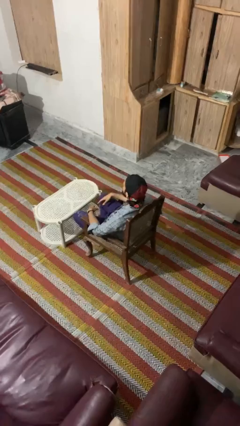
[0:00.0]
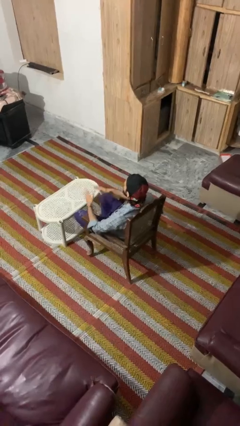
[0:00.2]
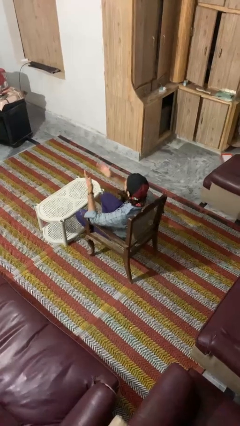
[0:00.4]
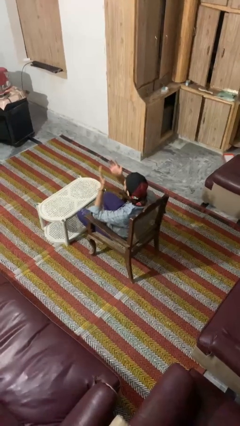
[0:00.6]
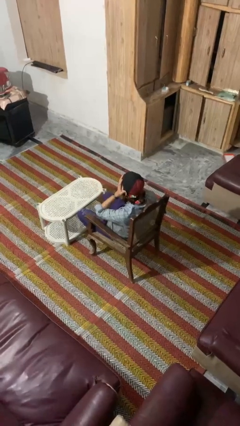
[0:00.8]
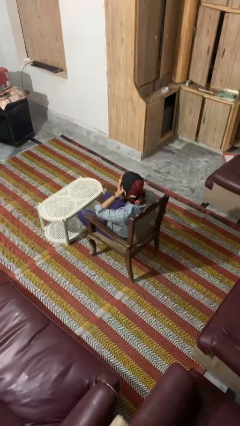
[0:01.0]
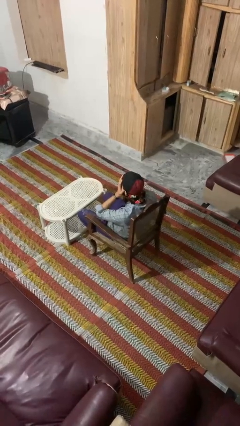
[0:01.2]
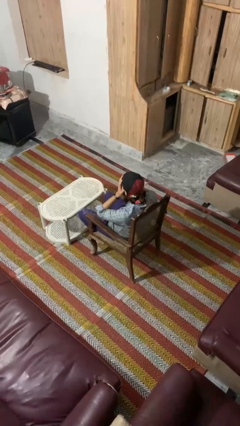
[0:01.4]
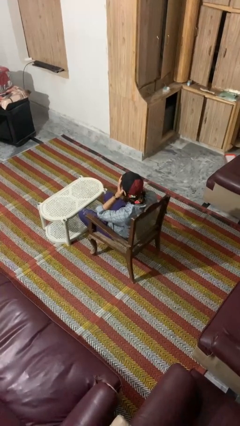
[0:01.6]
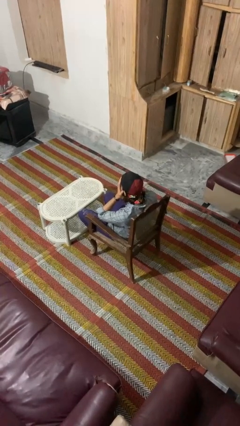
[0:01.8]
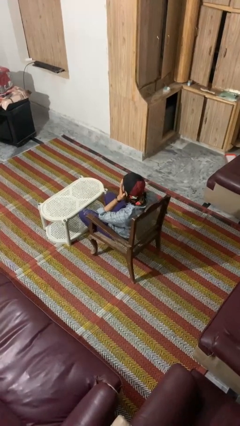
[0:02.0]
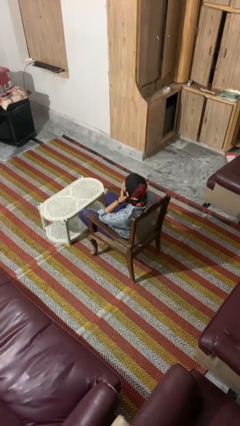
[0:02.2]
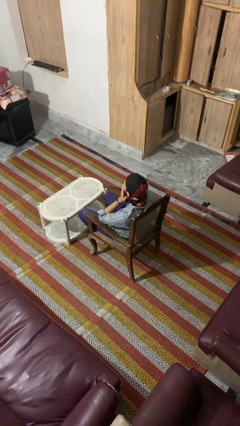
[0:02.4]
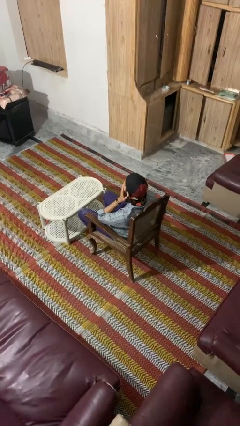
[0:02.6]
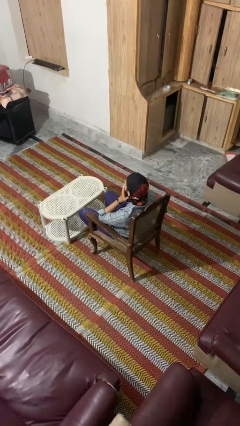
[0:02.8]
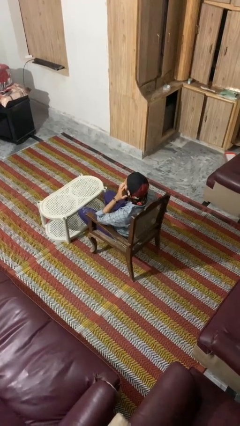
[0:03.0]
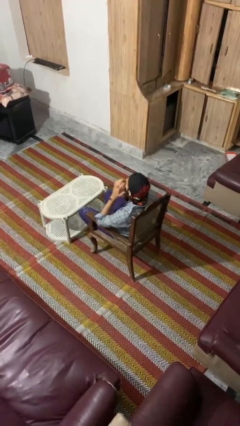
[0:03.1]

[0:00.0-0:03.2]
person covers face with hands

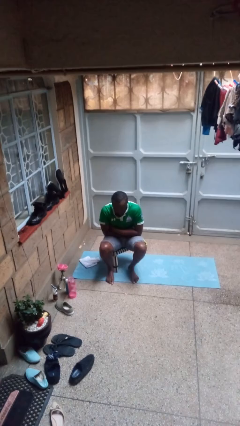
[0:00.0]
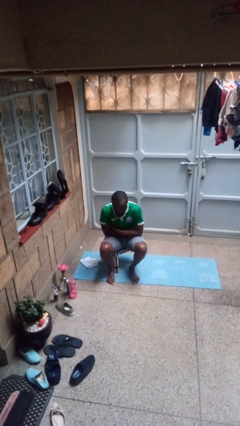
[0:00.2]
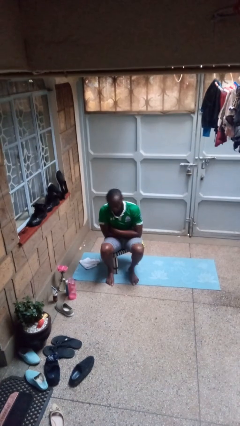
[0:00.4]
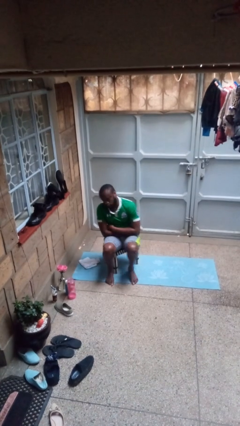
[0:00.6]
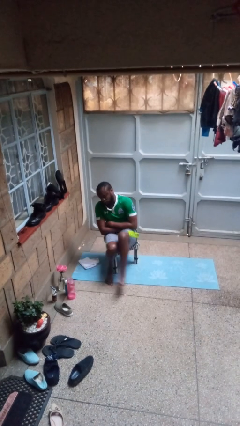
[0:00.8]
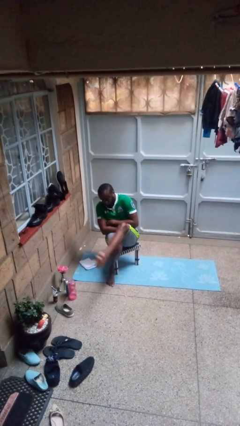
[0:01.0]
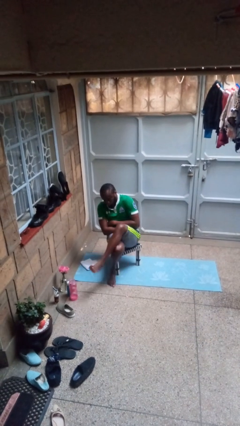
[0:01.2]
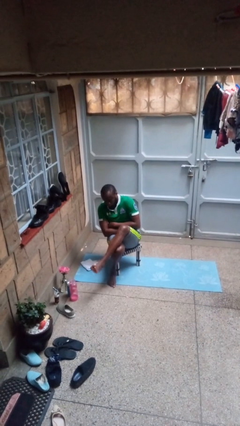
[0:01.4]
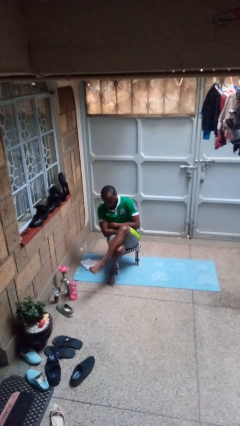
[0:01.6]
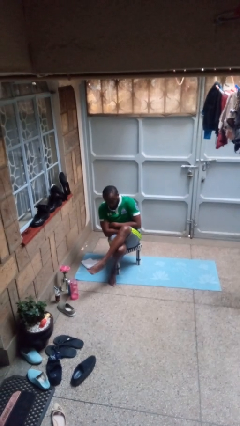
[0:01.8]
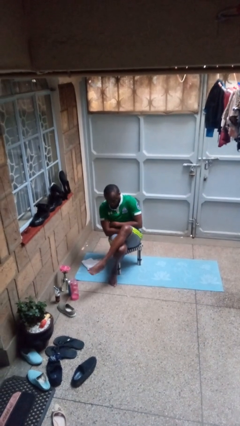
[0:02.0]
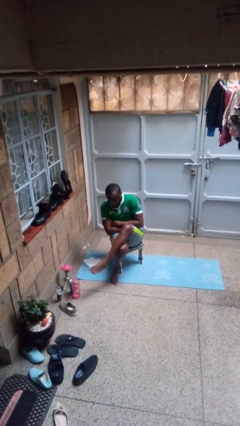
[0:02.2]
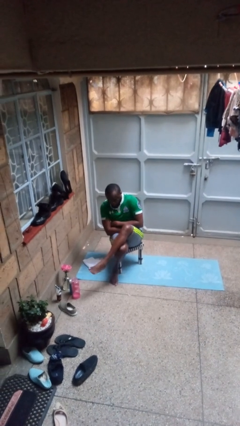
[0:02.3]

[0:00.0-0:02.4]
person crosses legs

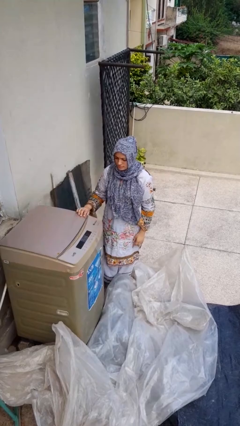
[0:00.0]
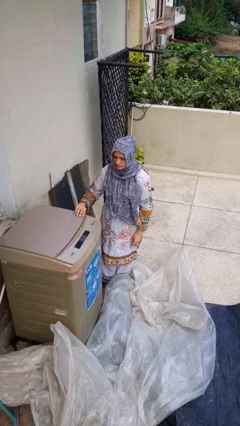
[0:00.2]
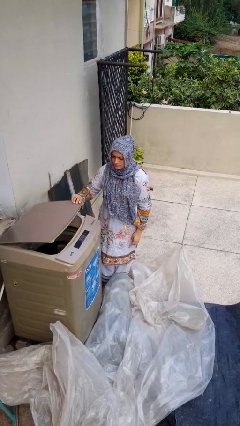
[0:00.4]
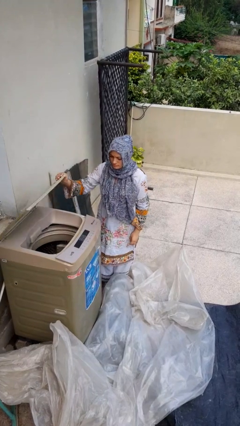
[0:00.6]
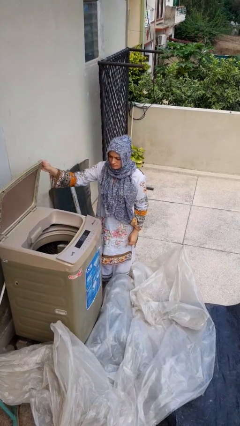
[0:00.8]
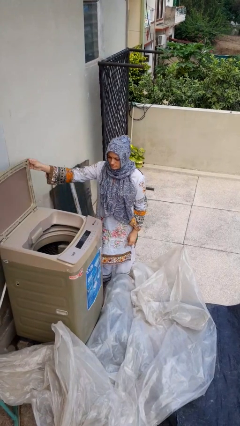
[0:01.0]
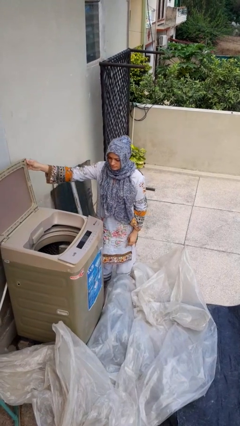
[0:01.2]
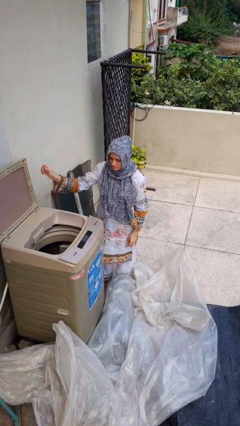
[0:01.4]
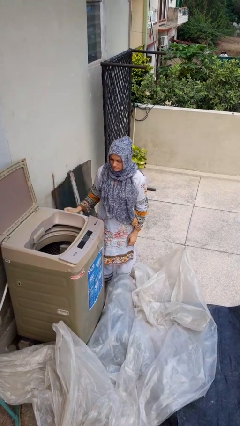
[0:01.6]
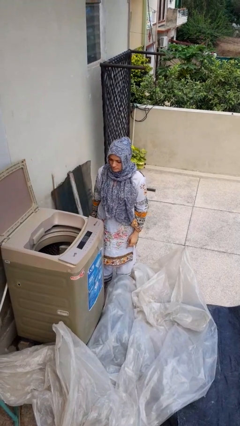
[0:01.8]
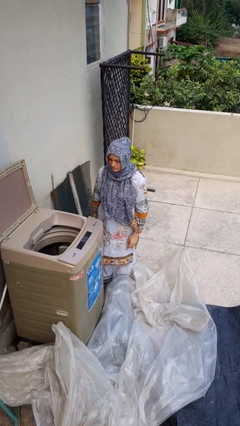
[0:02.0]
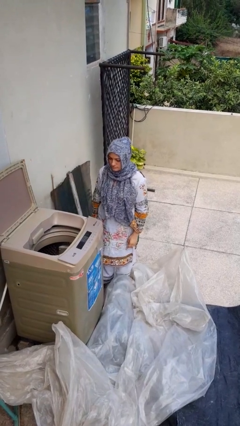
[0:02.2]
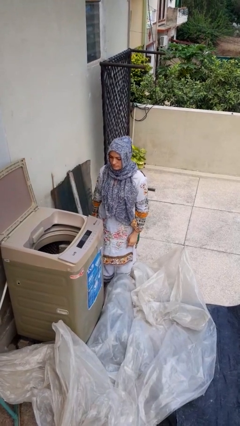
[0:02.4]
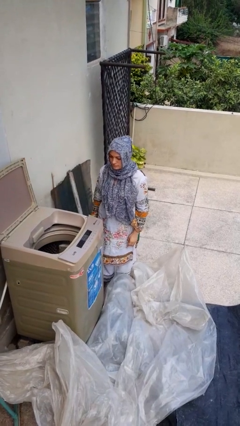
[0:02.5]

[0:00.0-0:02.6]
person opens clothes washer

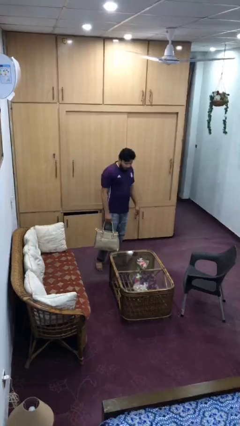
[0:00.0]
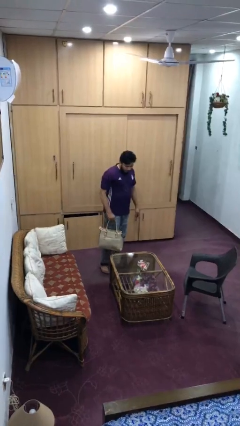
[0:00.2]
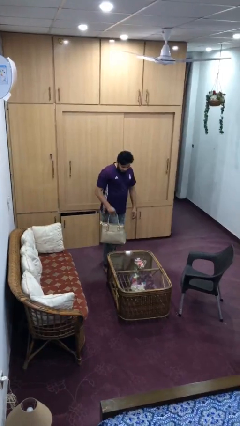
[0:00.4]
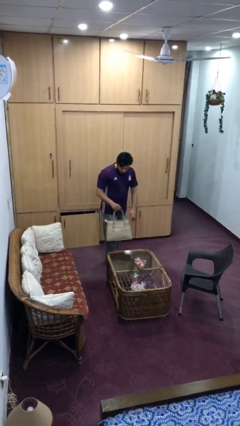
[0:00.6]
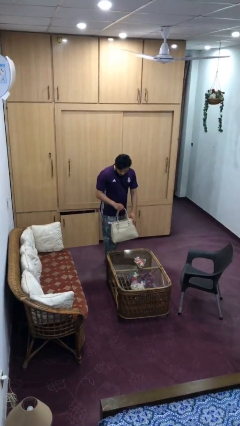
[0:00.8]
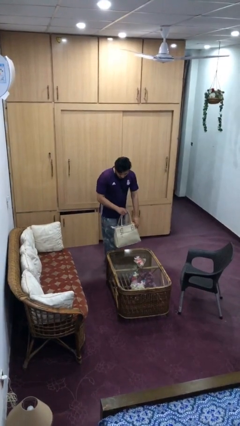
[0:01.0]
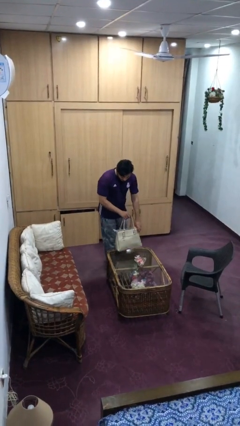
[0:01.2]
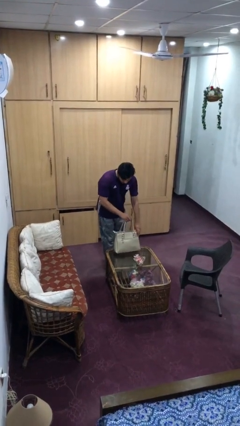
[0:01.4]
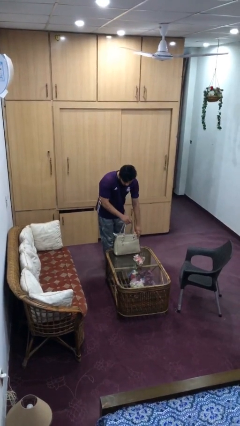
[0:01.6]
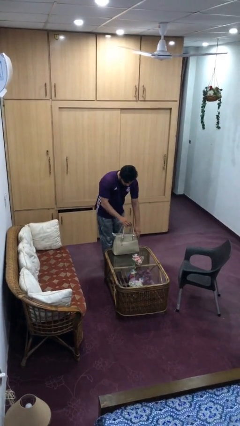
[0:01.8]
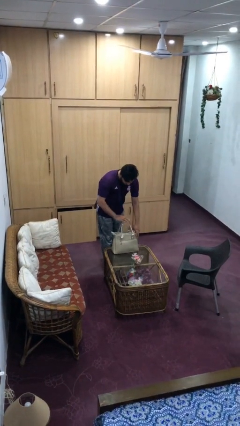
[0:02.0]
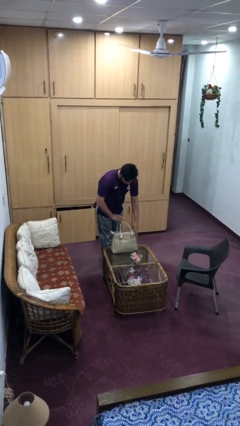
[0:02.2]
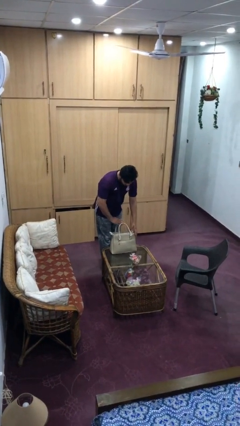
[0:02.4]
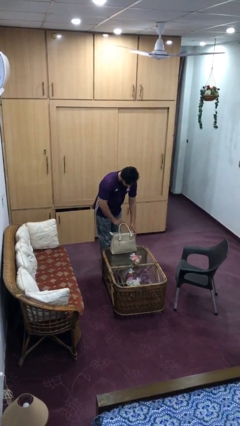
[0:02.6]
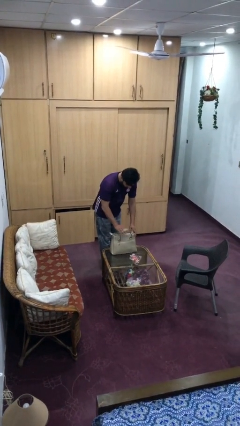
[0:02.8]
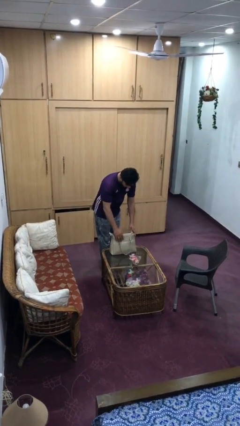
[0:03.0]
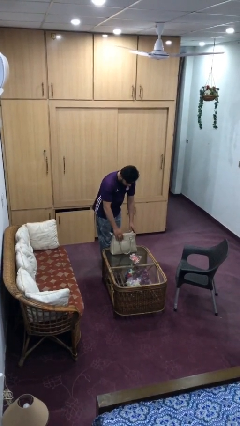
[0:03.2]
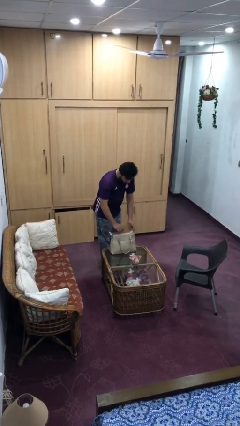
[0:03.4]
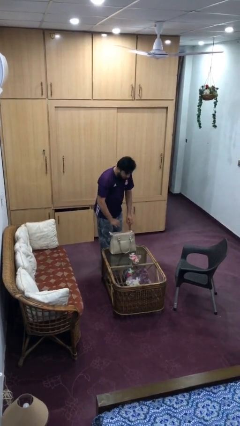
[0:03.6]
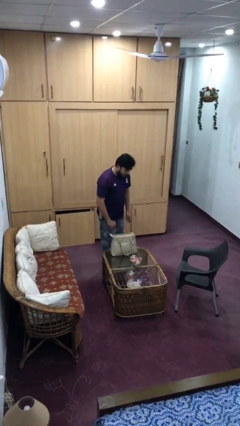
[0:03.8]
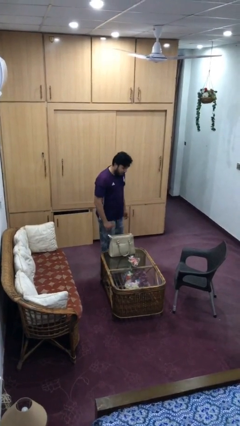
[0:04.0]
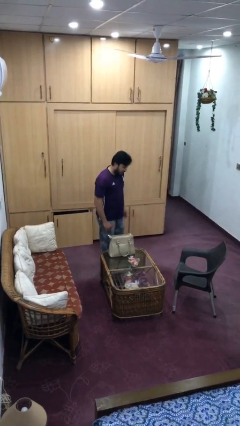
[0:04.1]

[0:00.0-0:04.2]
person puts down object on table

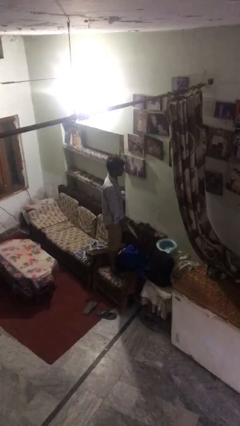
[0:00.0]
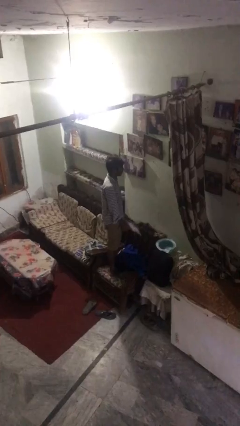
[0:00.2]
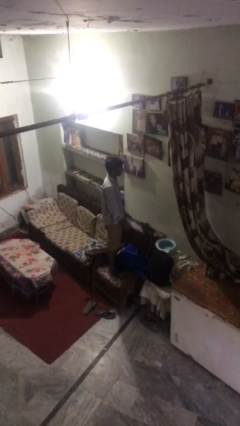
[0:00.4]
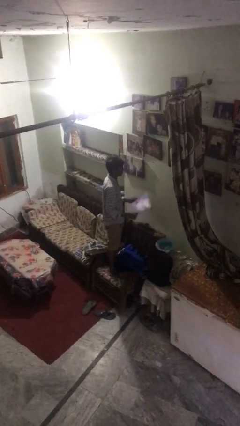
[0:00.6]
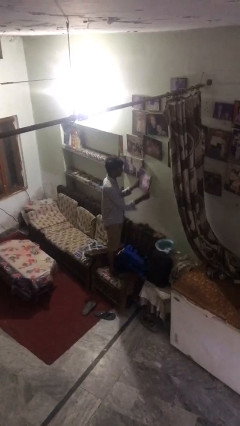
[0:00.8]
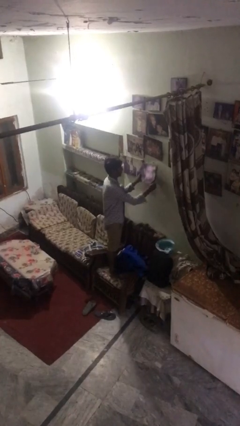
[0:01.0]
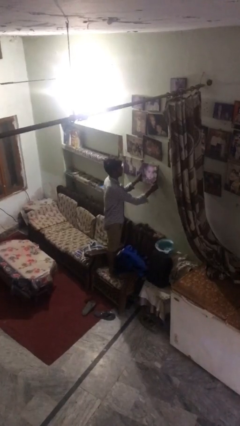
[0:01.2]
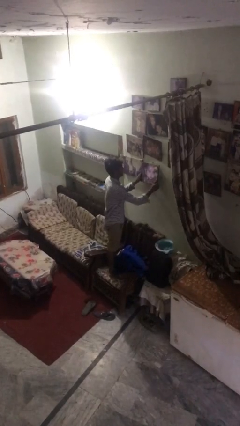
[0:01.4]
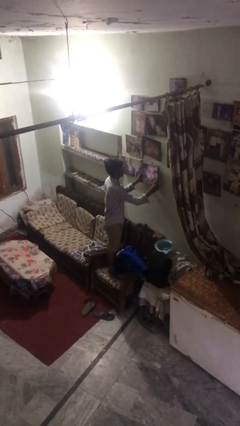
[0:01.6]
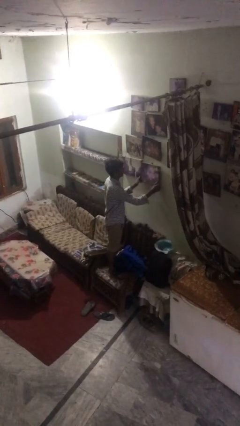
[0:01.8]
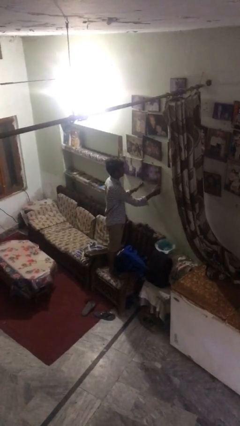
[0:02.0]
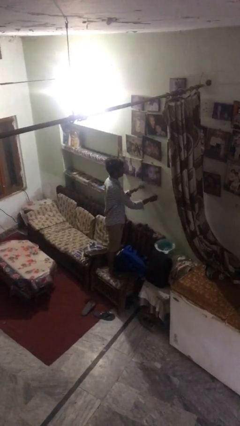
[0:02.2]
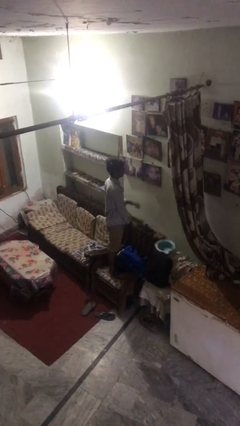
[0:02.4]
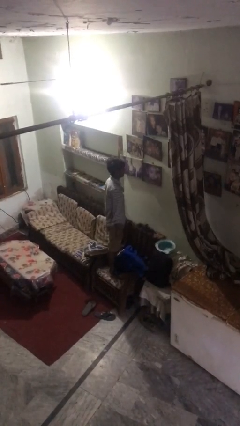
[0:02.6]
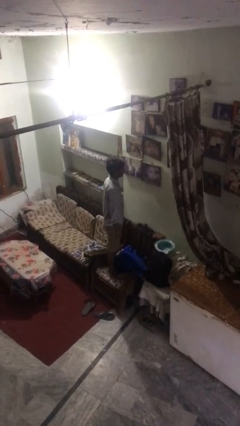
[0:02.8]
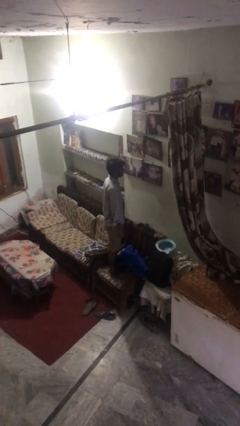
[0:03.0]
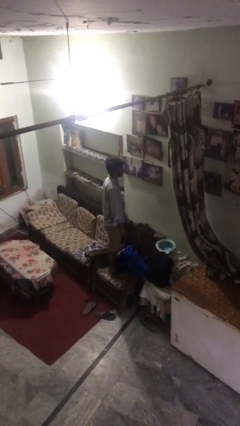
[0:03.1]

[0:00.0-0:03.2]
person puts up picture frame

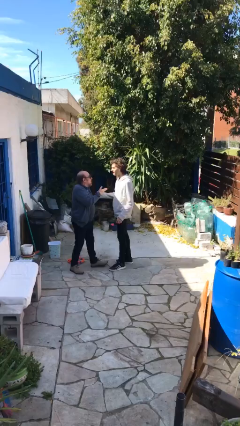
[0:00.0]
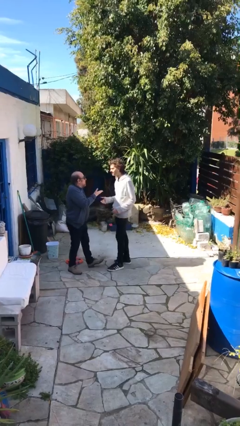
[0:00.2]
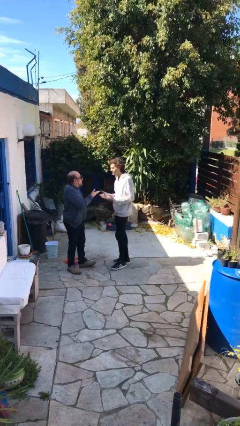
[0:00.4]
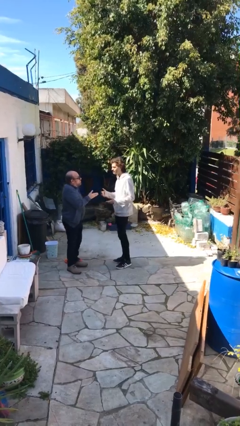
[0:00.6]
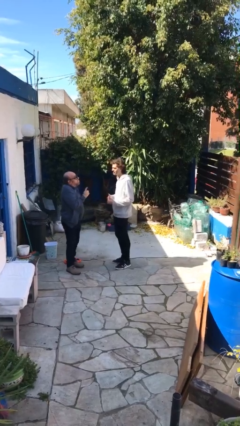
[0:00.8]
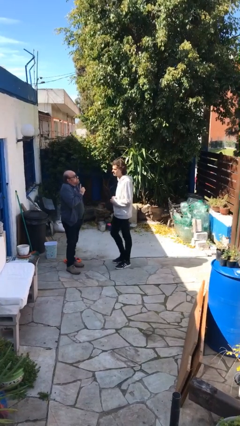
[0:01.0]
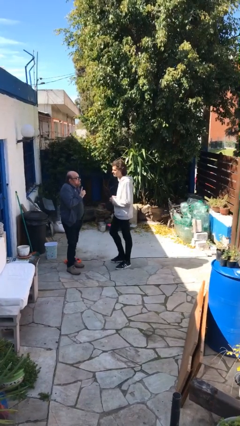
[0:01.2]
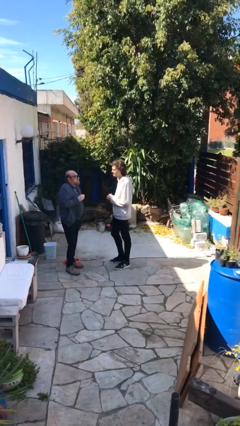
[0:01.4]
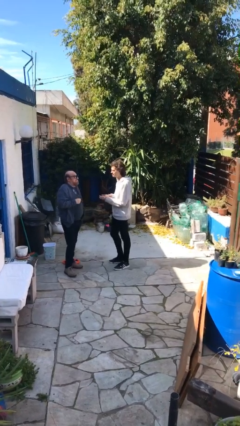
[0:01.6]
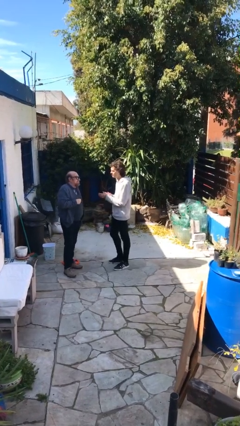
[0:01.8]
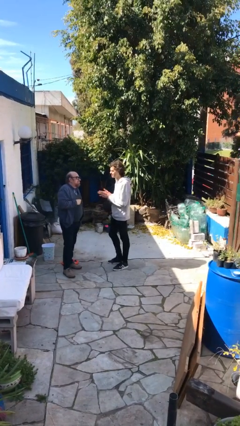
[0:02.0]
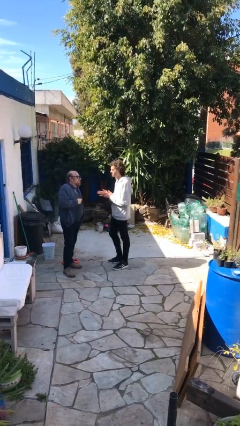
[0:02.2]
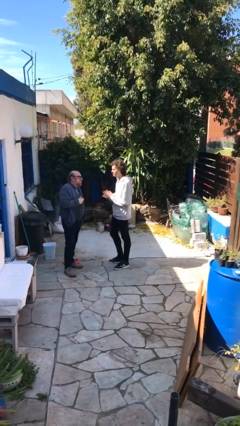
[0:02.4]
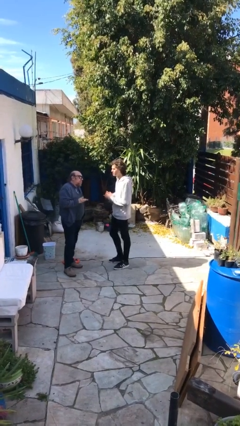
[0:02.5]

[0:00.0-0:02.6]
person talks to person
